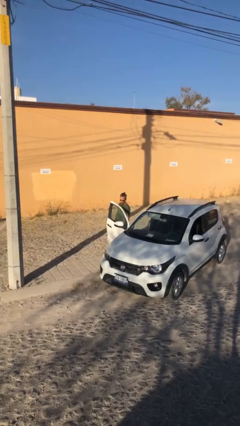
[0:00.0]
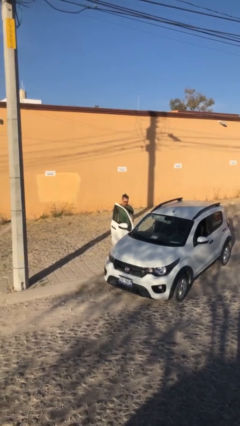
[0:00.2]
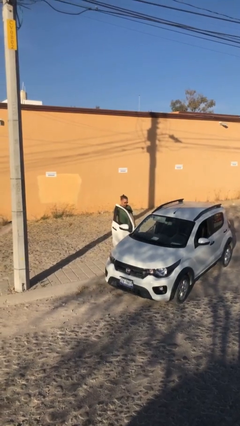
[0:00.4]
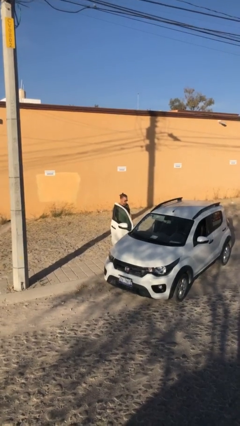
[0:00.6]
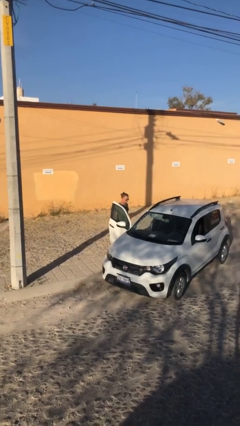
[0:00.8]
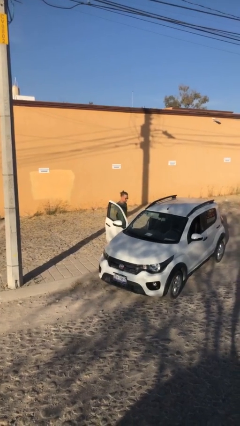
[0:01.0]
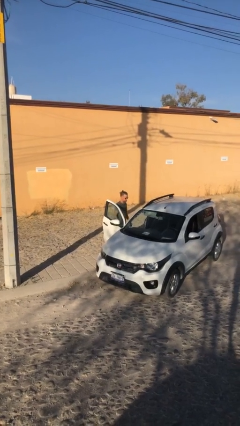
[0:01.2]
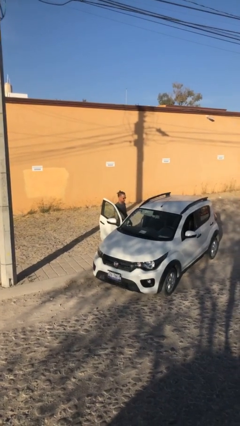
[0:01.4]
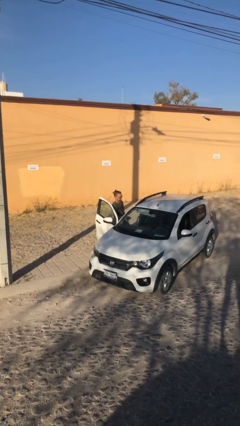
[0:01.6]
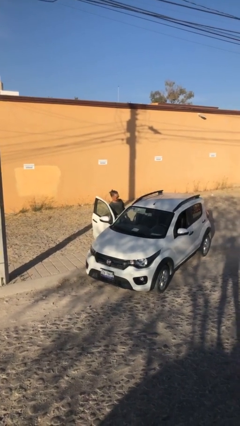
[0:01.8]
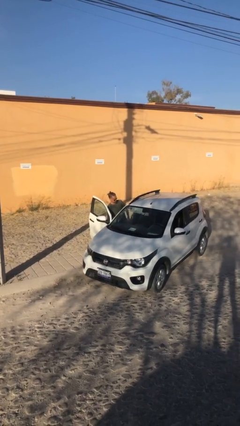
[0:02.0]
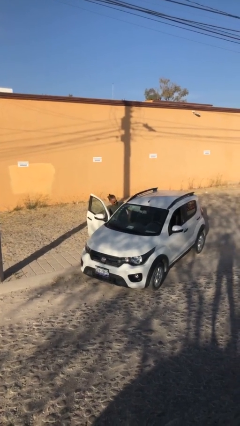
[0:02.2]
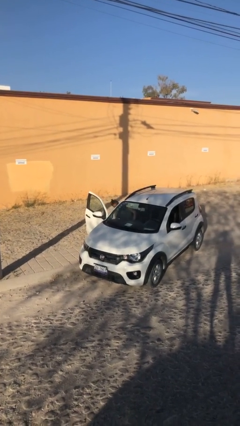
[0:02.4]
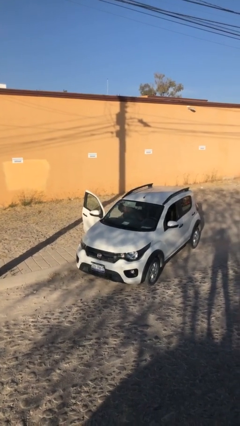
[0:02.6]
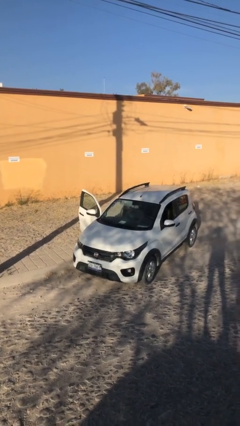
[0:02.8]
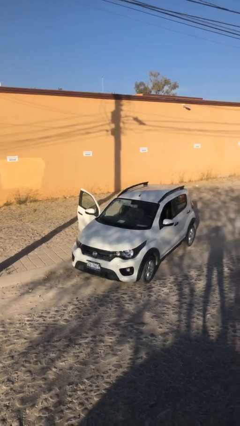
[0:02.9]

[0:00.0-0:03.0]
person enters car

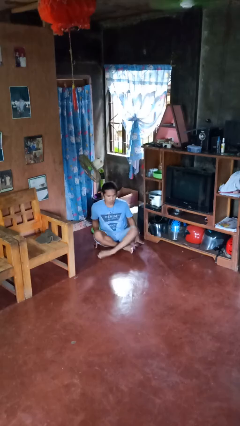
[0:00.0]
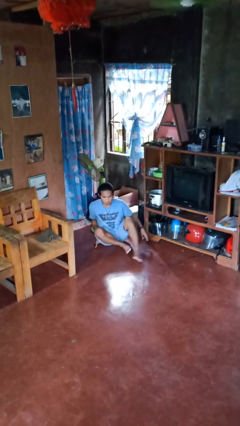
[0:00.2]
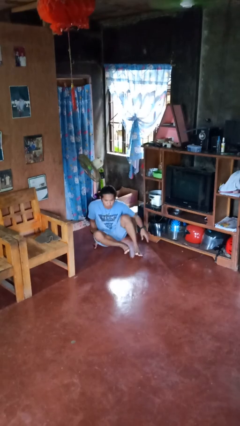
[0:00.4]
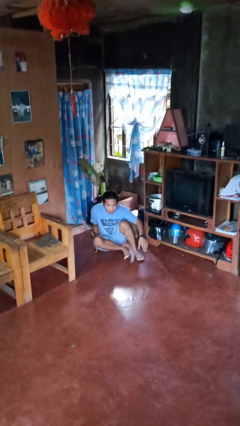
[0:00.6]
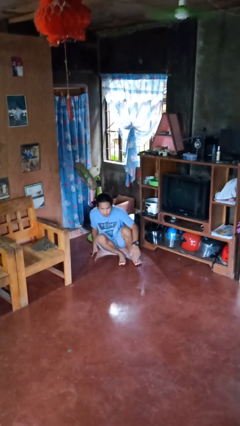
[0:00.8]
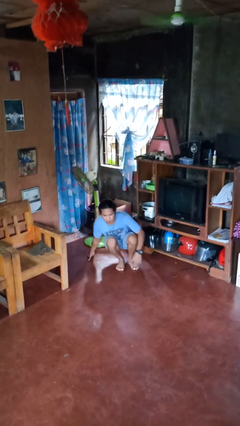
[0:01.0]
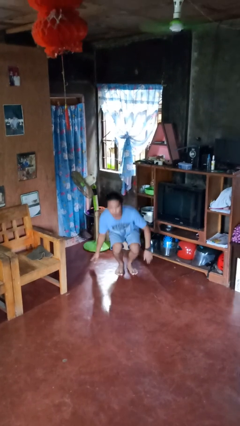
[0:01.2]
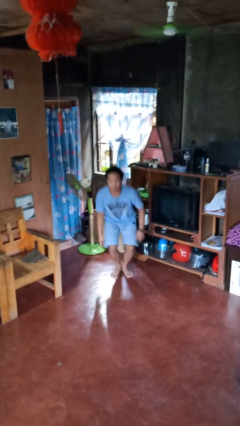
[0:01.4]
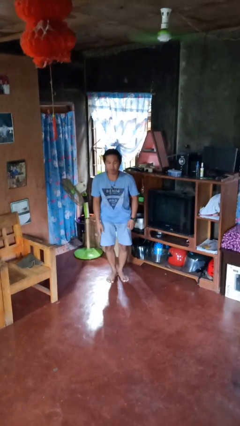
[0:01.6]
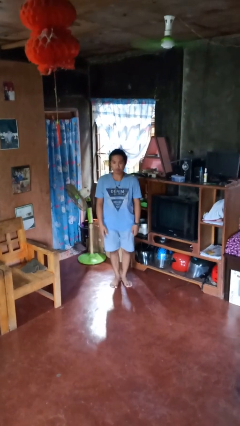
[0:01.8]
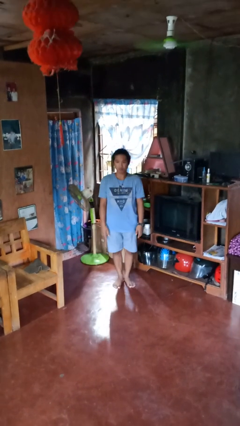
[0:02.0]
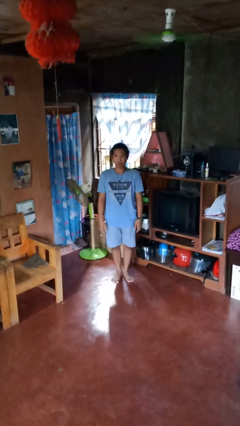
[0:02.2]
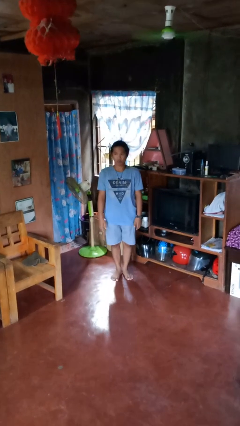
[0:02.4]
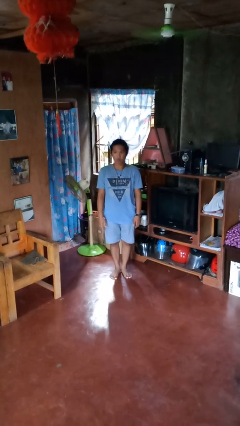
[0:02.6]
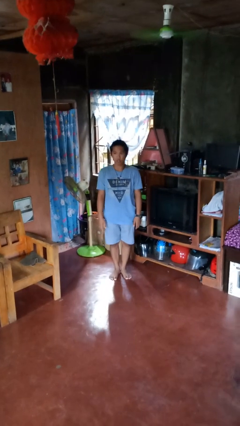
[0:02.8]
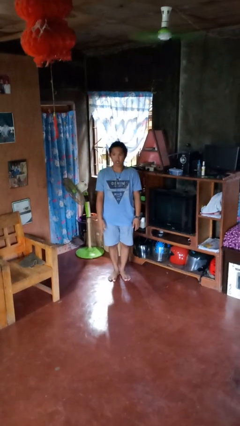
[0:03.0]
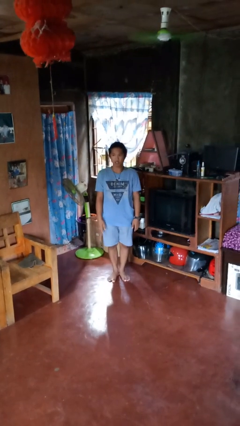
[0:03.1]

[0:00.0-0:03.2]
person stands up from floor

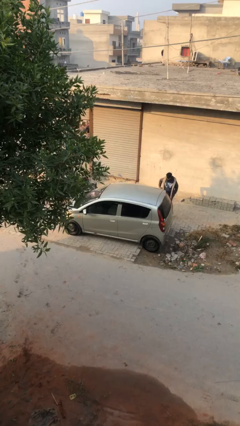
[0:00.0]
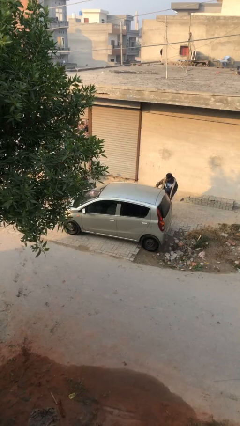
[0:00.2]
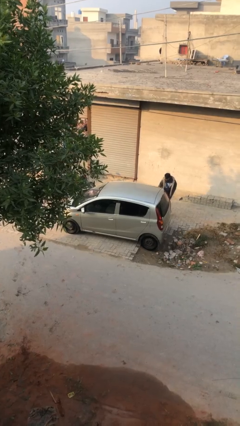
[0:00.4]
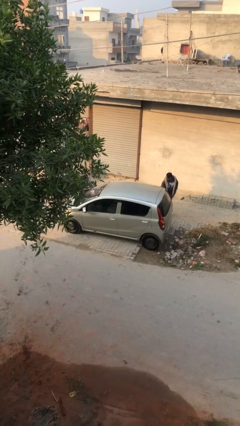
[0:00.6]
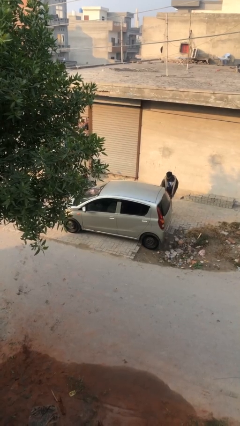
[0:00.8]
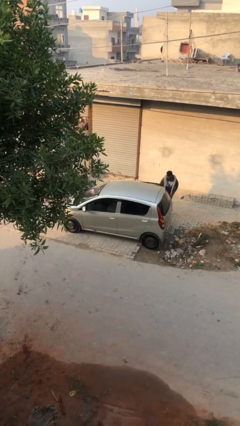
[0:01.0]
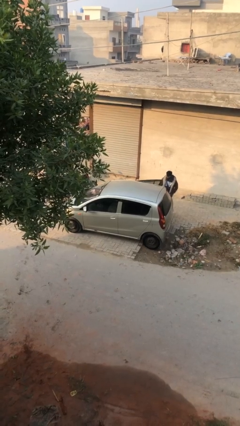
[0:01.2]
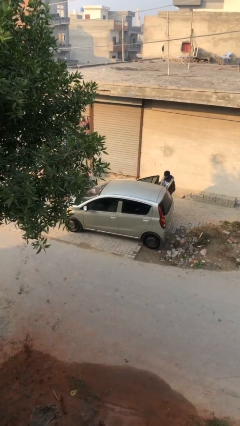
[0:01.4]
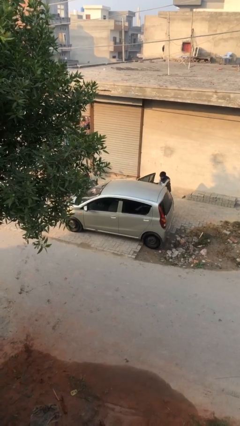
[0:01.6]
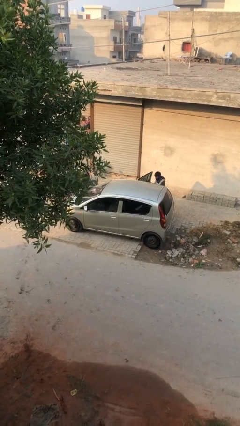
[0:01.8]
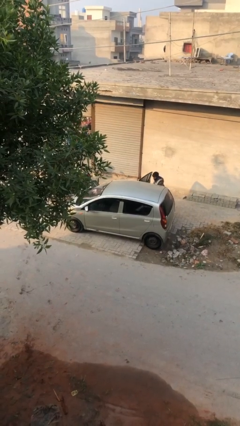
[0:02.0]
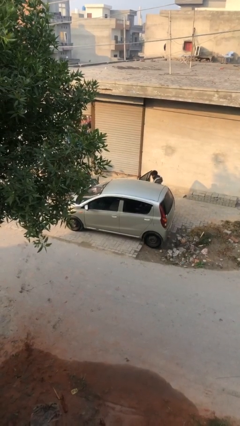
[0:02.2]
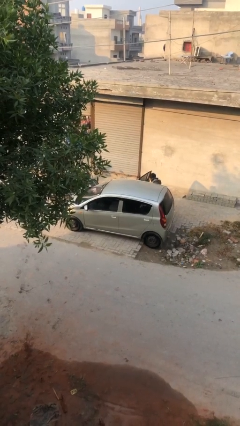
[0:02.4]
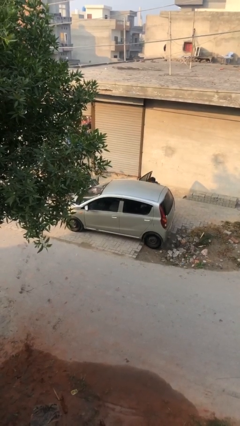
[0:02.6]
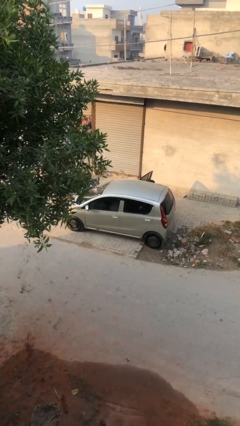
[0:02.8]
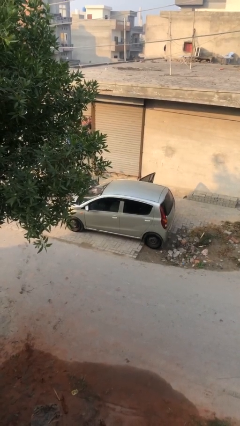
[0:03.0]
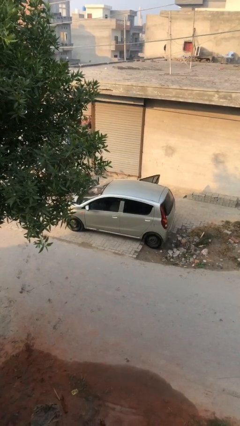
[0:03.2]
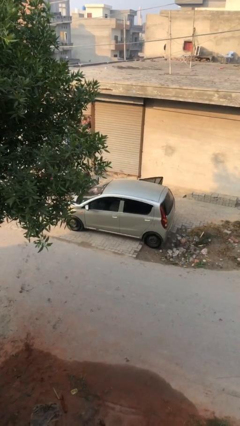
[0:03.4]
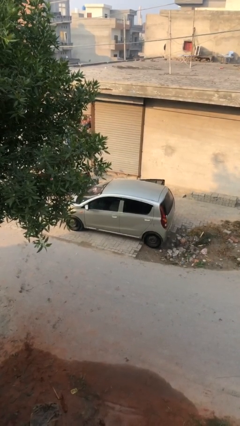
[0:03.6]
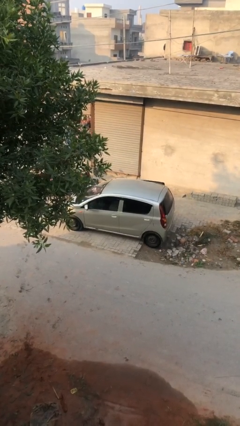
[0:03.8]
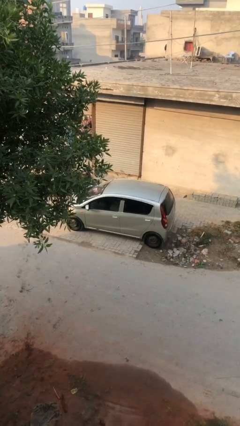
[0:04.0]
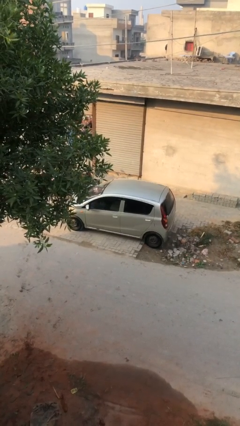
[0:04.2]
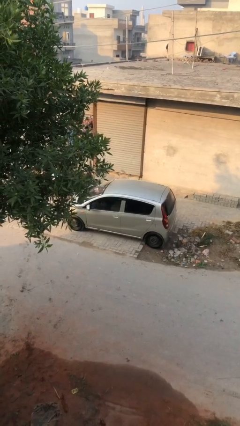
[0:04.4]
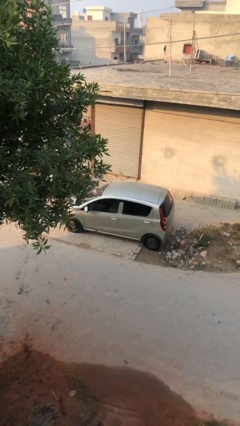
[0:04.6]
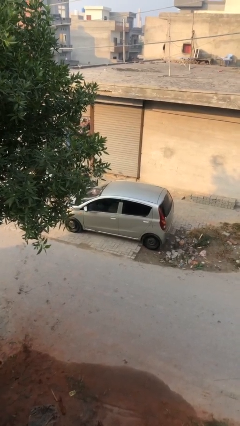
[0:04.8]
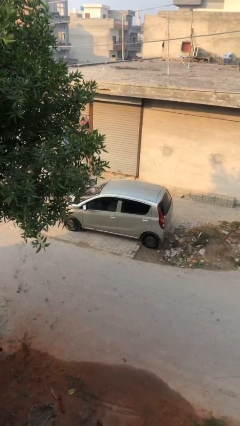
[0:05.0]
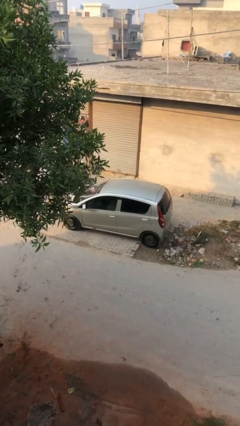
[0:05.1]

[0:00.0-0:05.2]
car picks up person

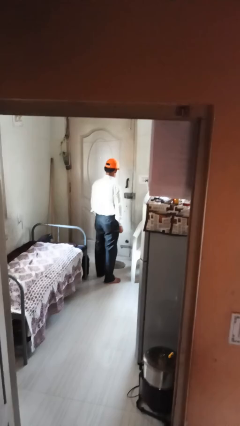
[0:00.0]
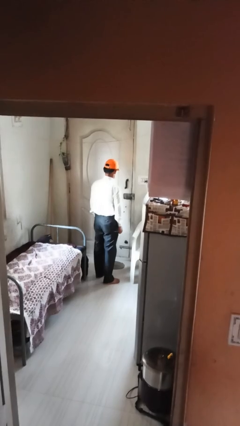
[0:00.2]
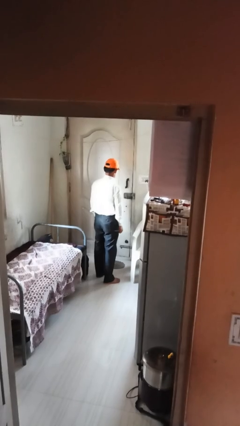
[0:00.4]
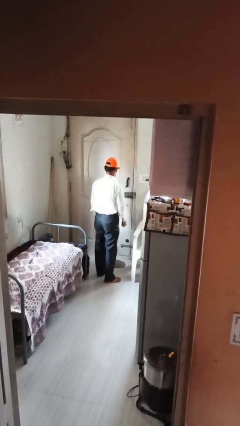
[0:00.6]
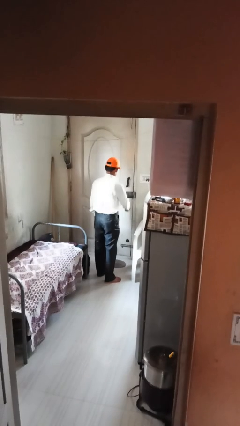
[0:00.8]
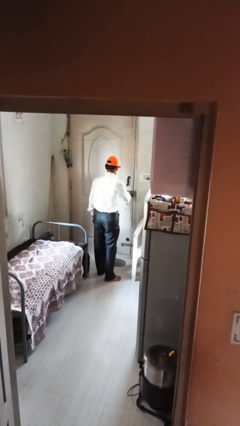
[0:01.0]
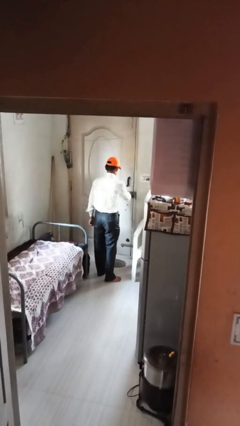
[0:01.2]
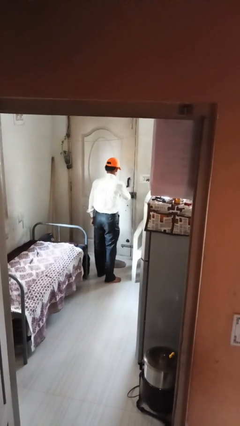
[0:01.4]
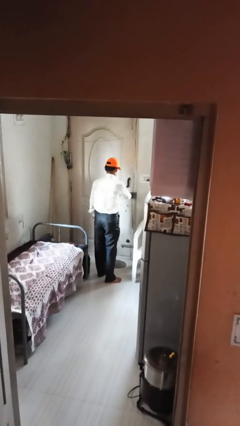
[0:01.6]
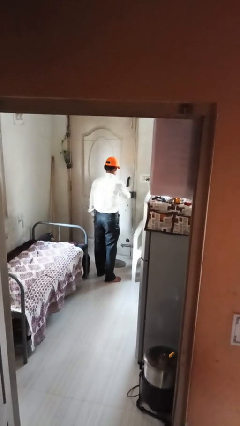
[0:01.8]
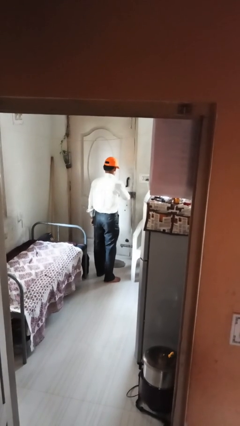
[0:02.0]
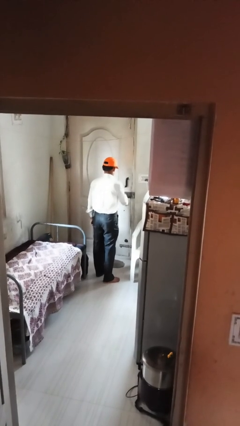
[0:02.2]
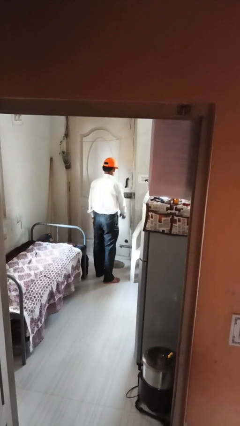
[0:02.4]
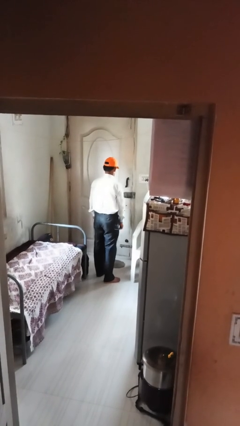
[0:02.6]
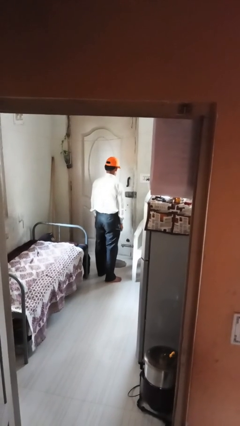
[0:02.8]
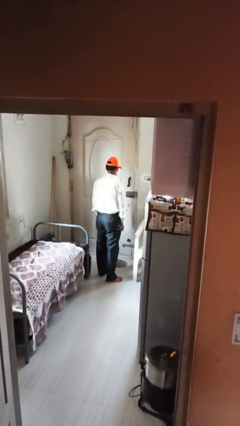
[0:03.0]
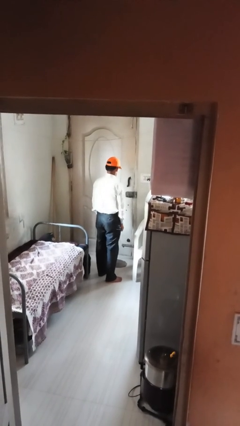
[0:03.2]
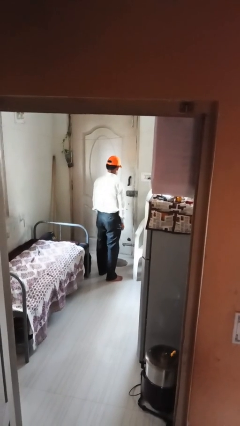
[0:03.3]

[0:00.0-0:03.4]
person unlocks door with keys

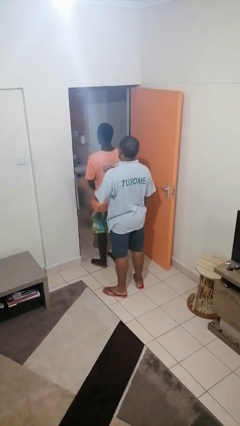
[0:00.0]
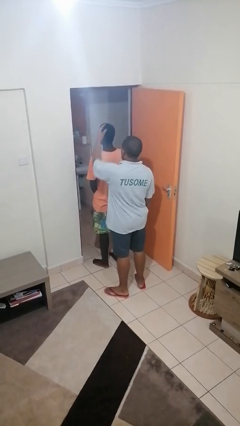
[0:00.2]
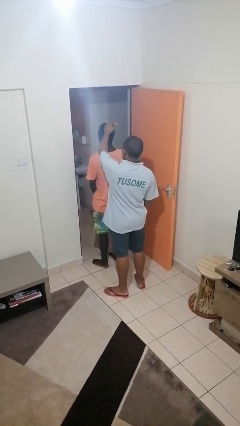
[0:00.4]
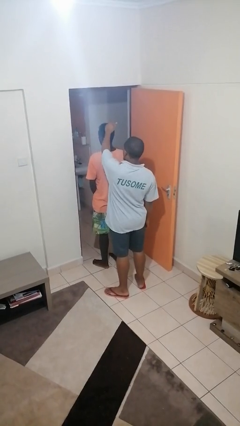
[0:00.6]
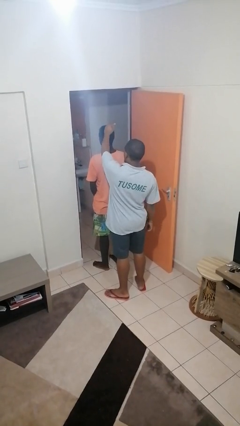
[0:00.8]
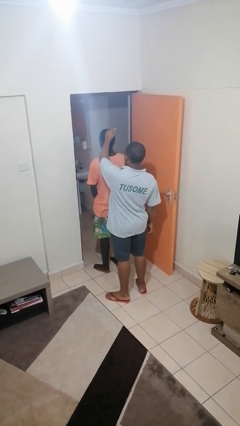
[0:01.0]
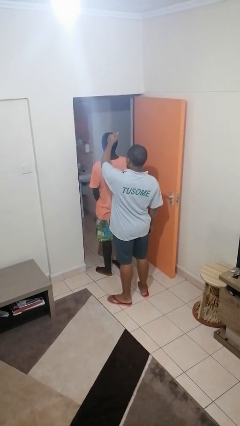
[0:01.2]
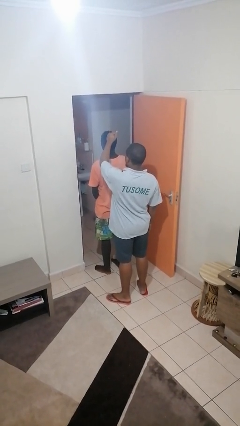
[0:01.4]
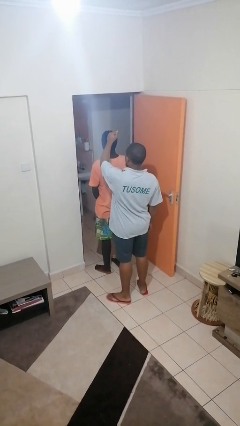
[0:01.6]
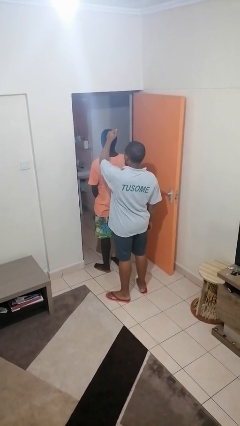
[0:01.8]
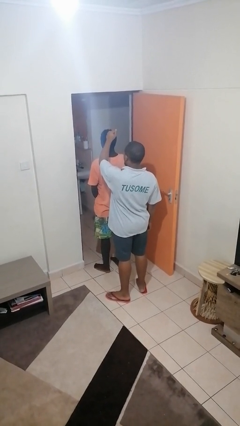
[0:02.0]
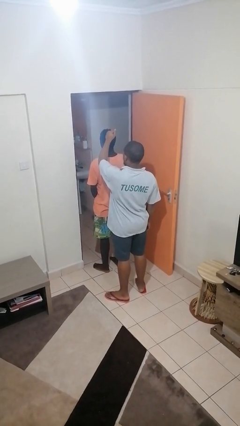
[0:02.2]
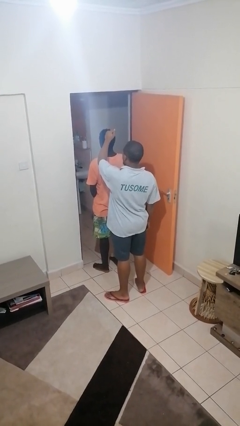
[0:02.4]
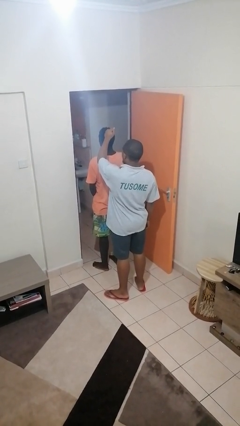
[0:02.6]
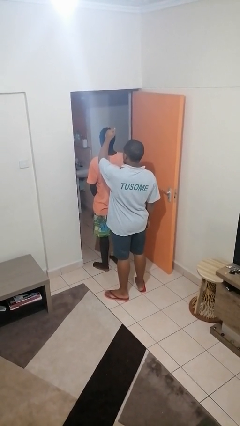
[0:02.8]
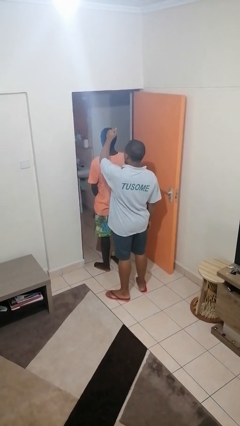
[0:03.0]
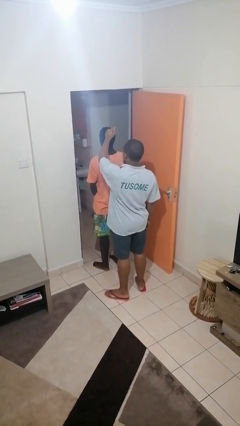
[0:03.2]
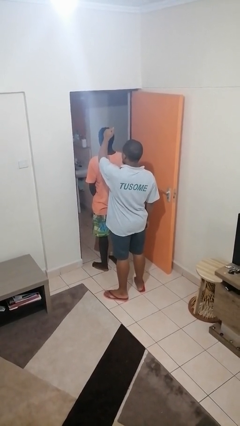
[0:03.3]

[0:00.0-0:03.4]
person grabs person by hair
